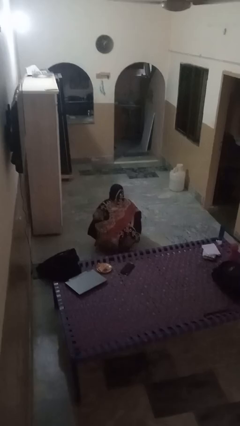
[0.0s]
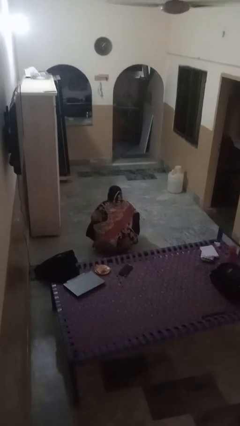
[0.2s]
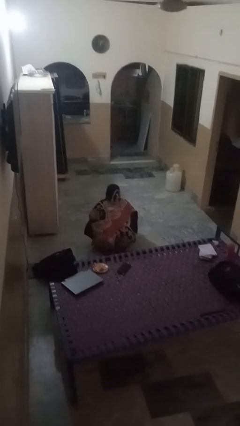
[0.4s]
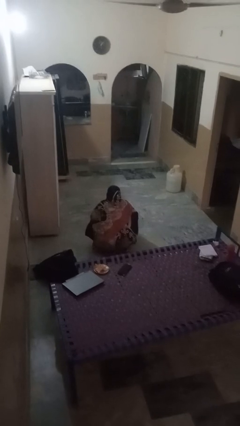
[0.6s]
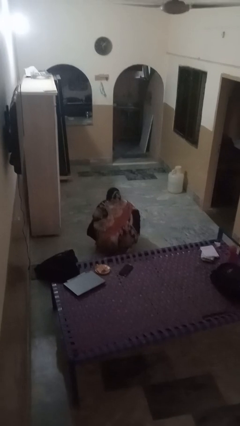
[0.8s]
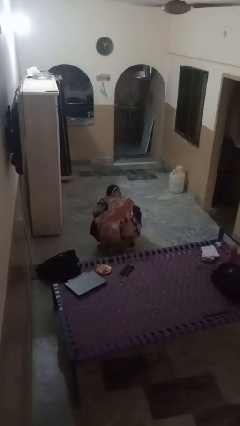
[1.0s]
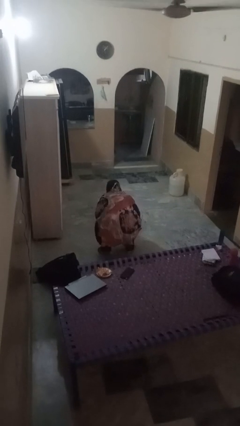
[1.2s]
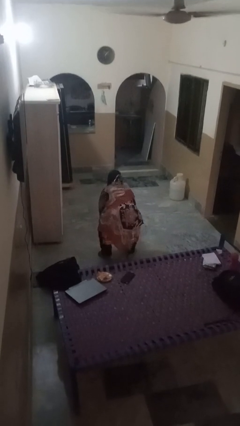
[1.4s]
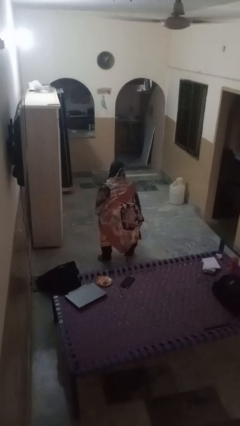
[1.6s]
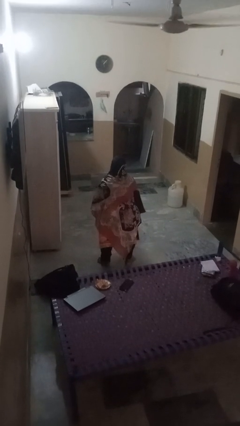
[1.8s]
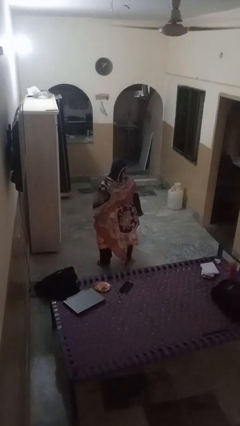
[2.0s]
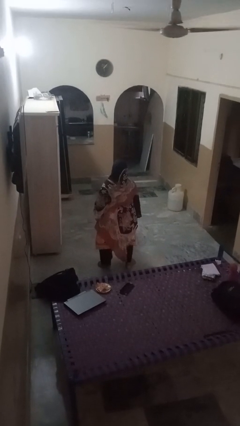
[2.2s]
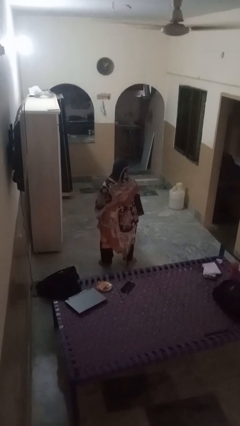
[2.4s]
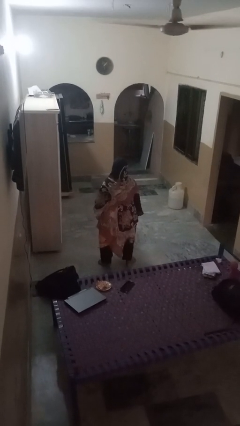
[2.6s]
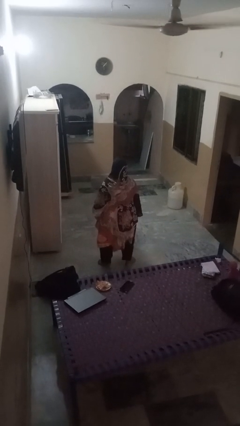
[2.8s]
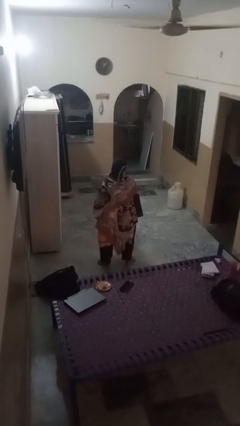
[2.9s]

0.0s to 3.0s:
person stands up

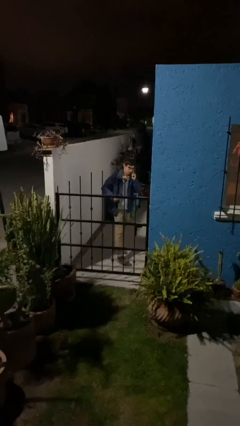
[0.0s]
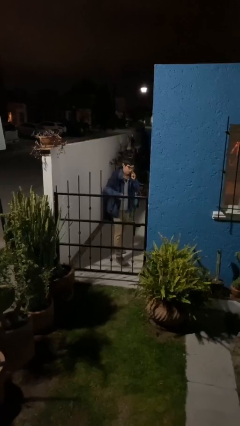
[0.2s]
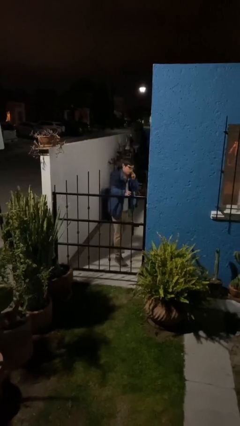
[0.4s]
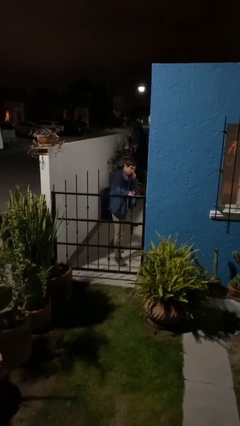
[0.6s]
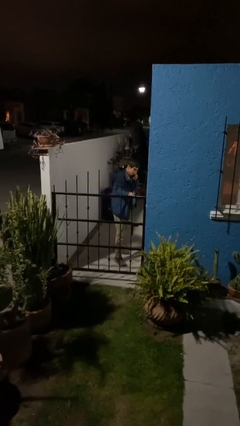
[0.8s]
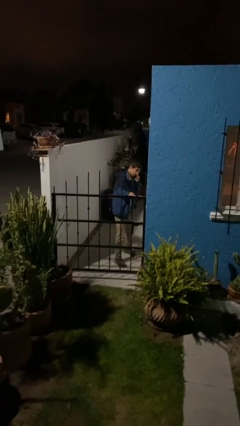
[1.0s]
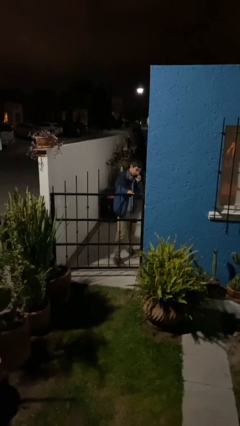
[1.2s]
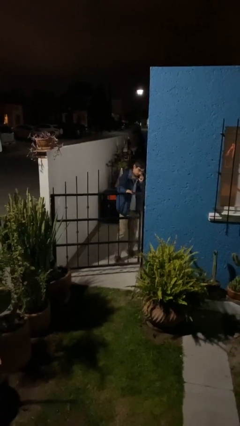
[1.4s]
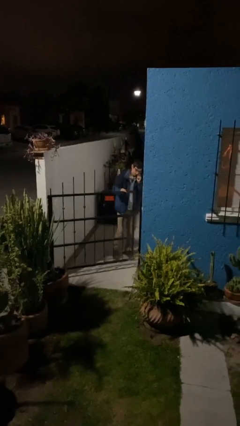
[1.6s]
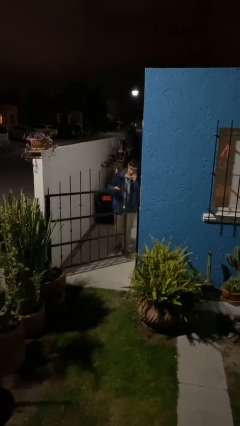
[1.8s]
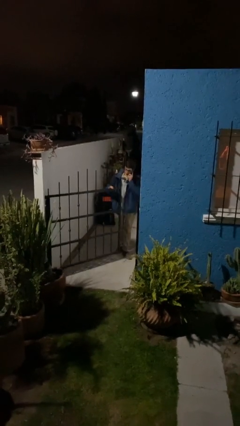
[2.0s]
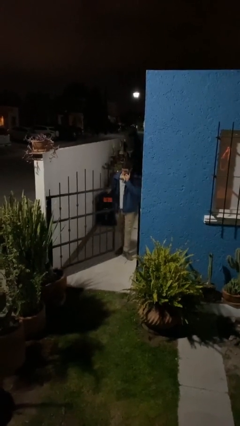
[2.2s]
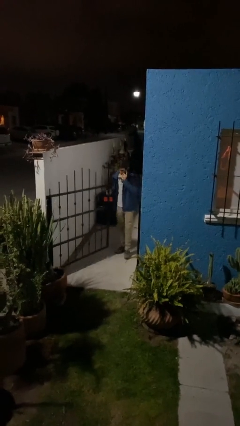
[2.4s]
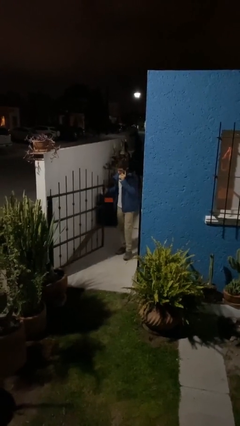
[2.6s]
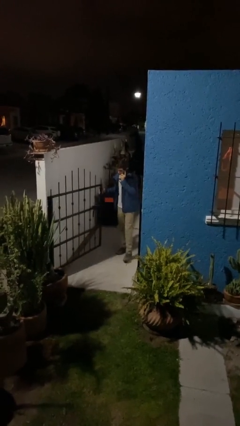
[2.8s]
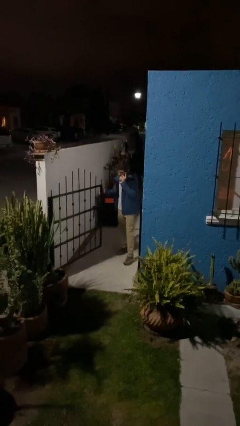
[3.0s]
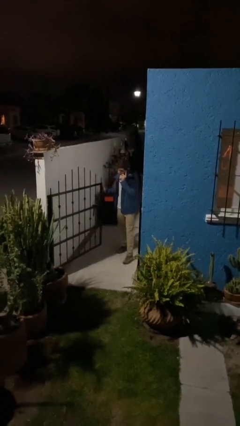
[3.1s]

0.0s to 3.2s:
person opens facility door

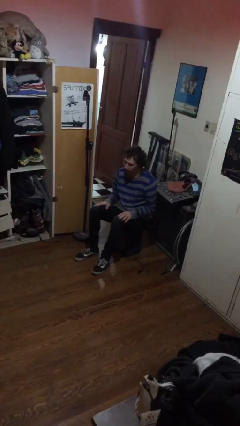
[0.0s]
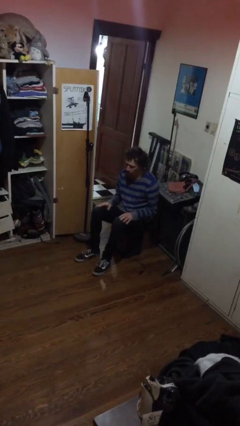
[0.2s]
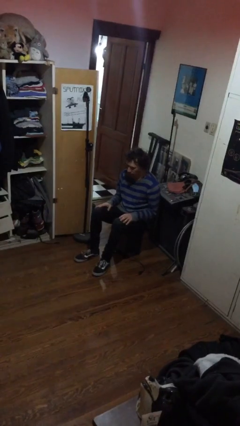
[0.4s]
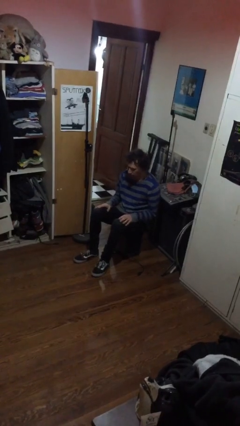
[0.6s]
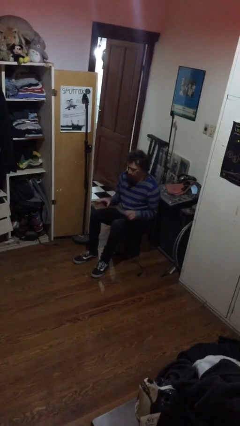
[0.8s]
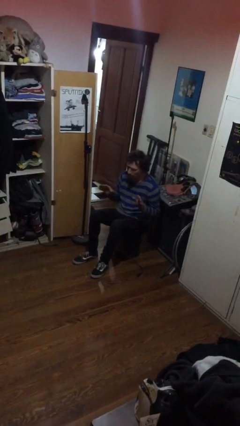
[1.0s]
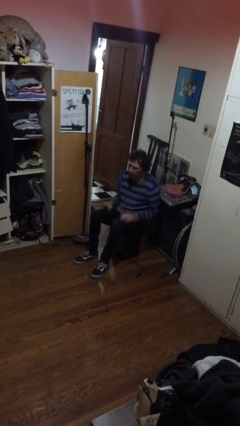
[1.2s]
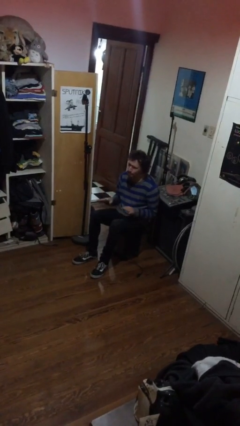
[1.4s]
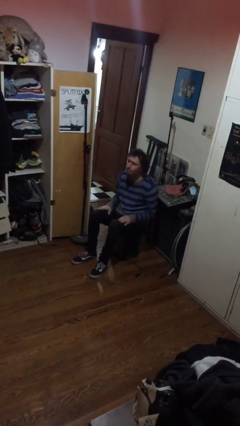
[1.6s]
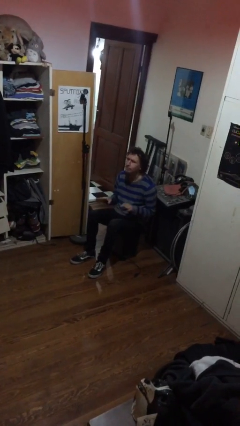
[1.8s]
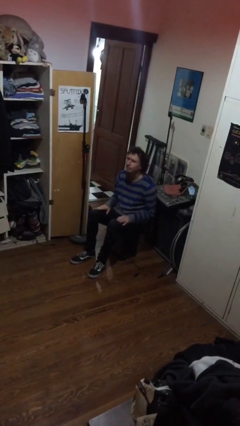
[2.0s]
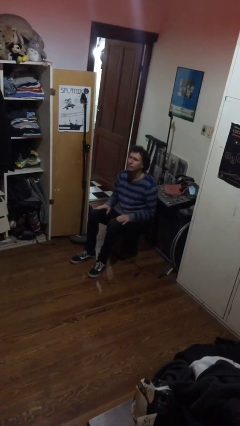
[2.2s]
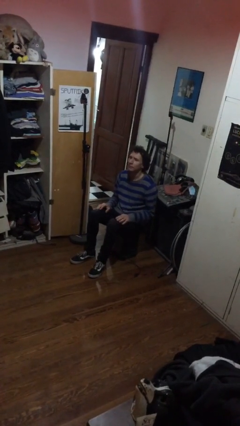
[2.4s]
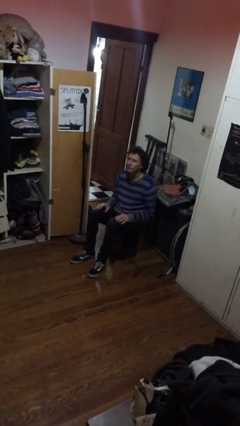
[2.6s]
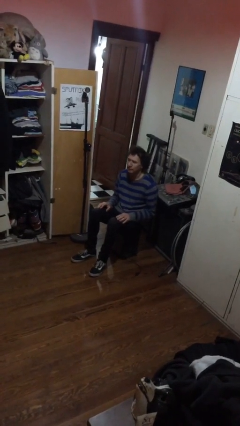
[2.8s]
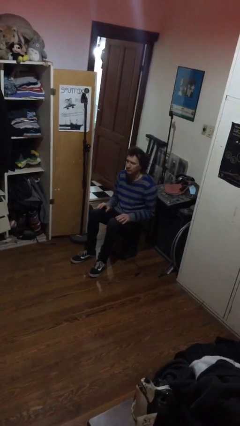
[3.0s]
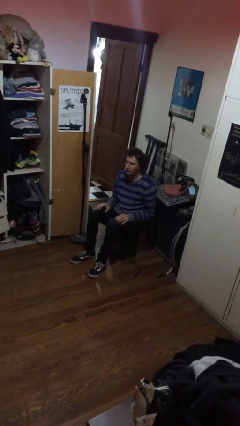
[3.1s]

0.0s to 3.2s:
person slaps hands on thighs

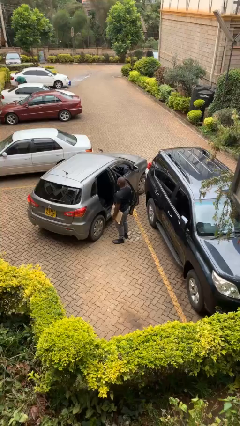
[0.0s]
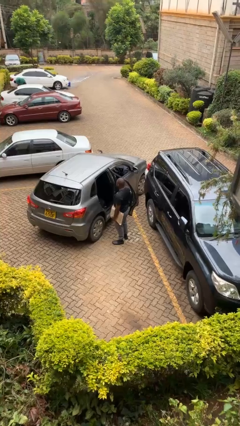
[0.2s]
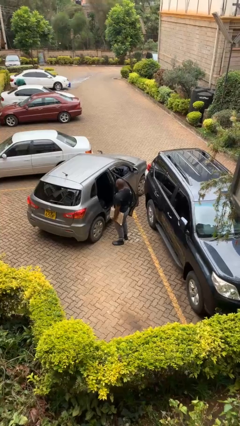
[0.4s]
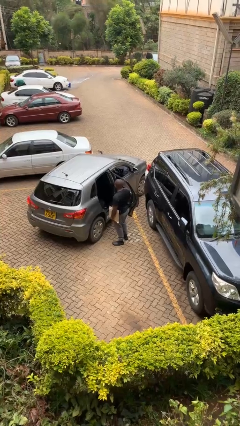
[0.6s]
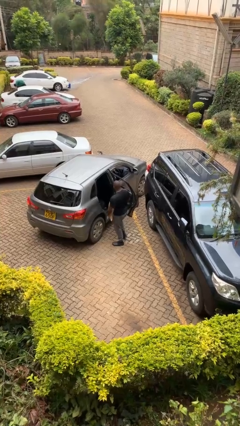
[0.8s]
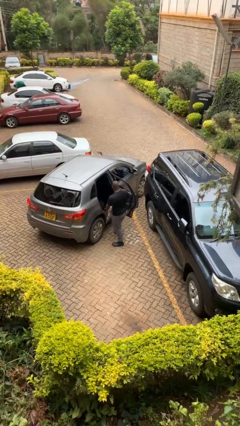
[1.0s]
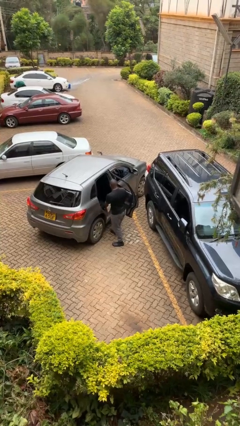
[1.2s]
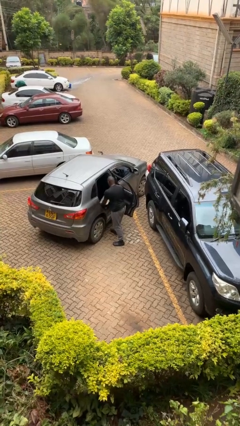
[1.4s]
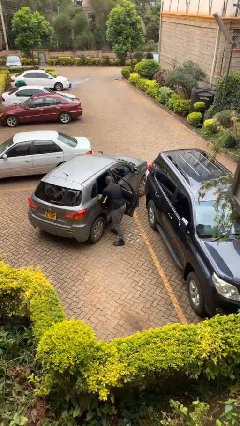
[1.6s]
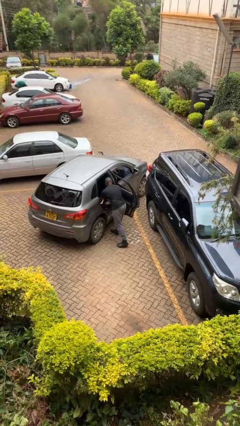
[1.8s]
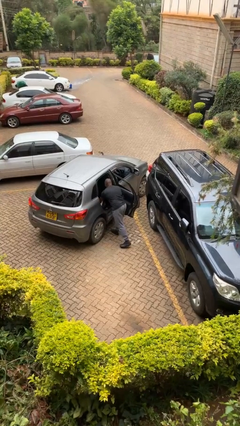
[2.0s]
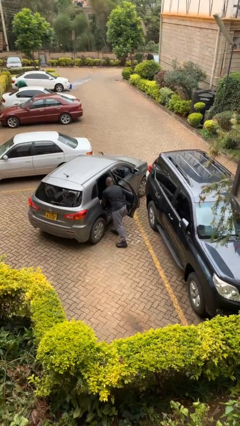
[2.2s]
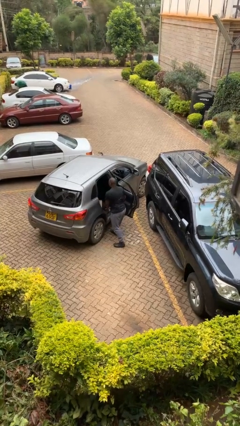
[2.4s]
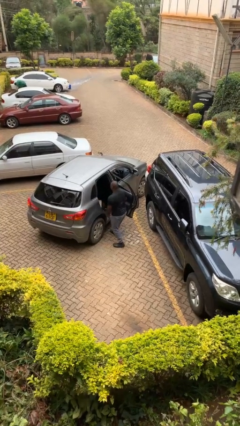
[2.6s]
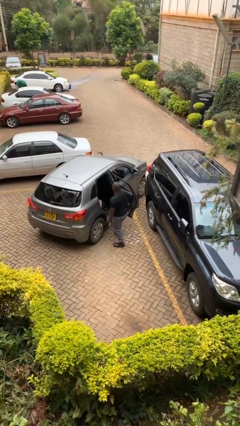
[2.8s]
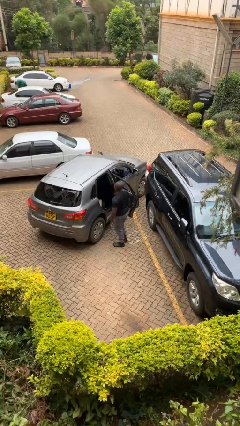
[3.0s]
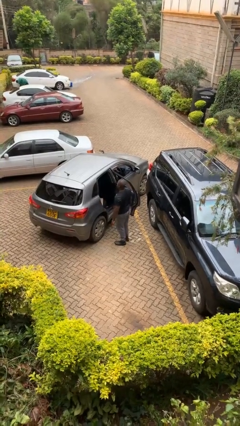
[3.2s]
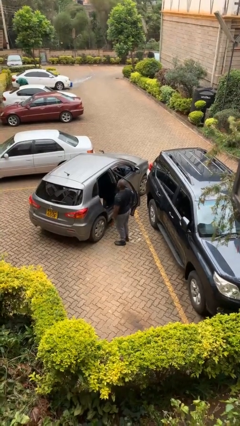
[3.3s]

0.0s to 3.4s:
person loads car

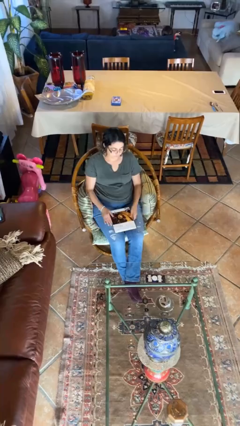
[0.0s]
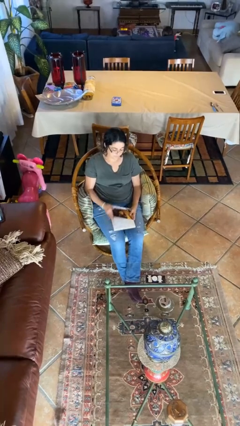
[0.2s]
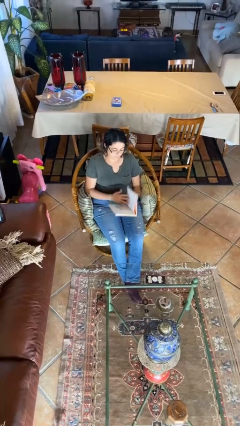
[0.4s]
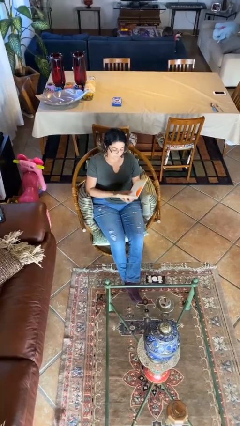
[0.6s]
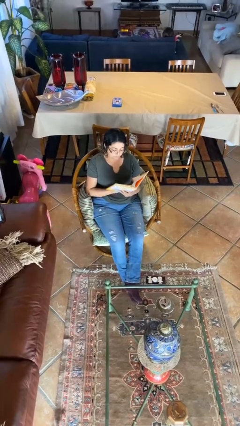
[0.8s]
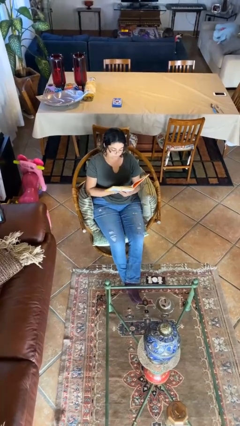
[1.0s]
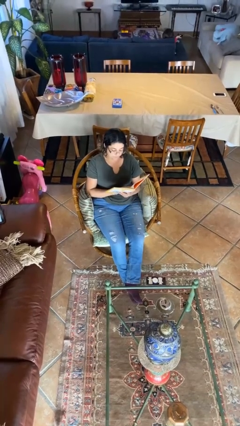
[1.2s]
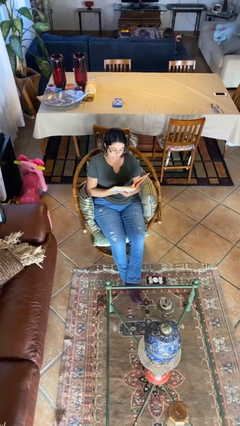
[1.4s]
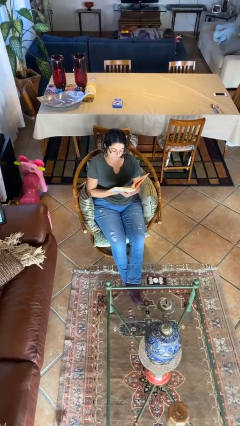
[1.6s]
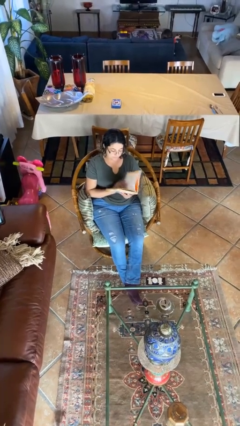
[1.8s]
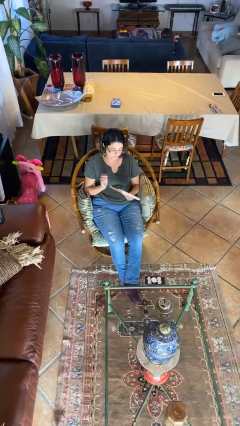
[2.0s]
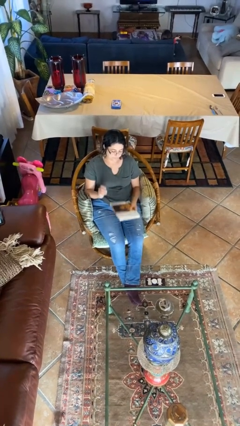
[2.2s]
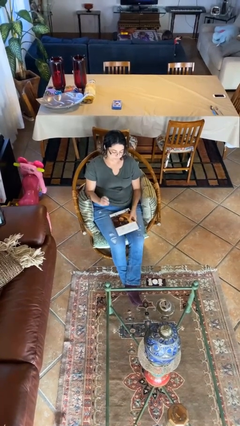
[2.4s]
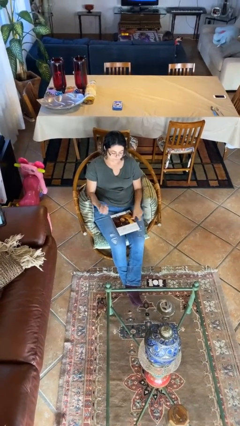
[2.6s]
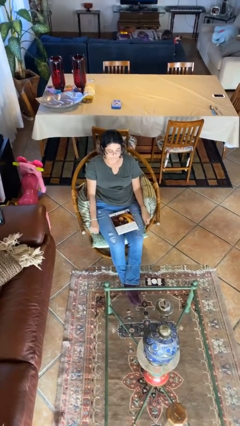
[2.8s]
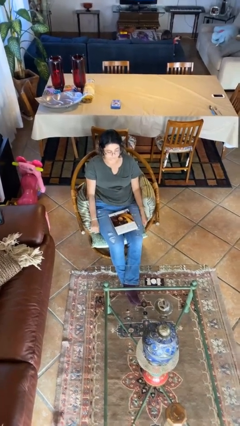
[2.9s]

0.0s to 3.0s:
person reads document
